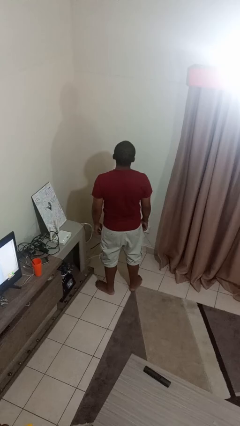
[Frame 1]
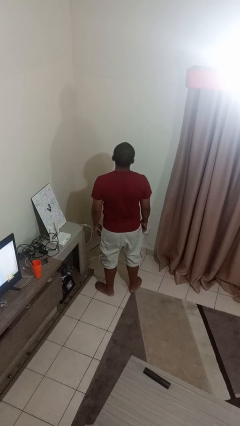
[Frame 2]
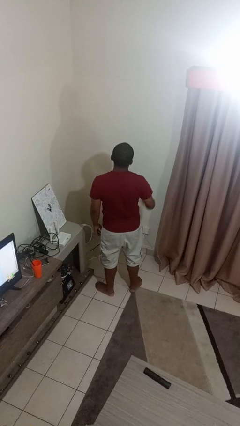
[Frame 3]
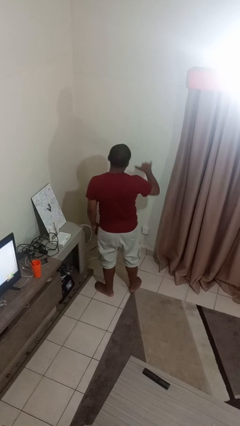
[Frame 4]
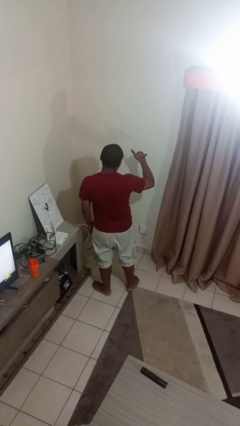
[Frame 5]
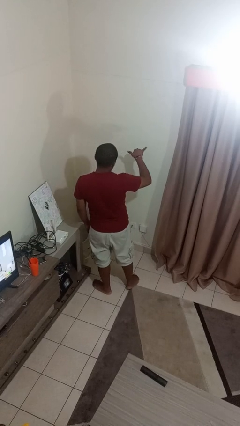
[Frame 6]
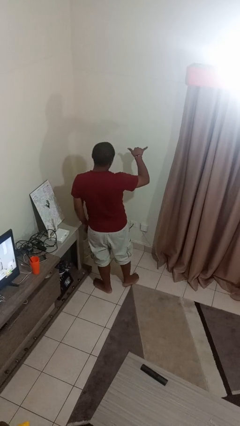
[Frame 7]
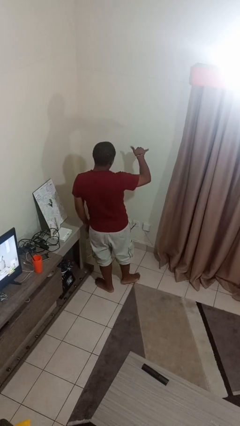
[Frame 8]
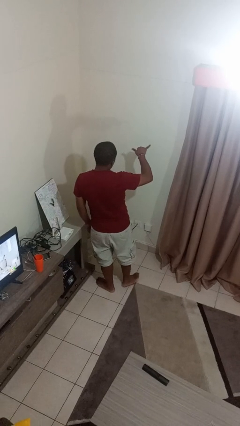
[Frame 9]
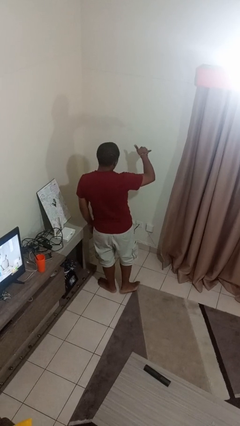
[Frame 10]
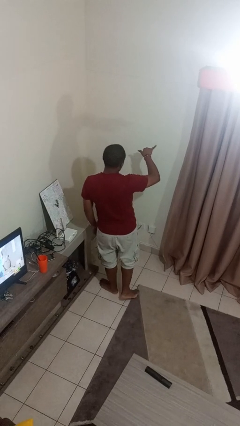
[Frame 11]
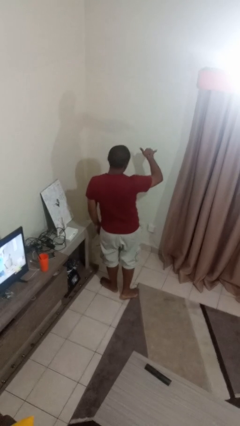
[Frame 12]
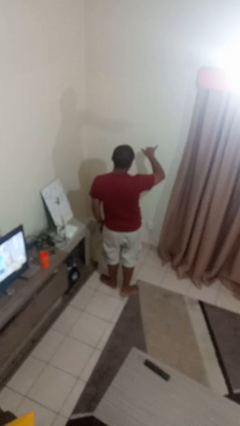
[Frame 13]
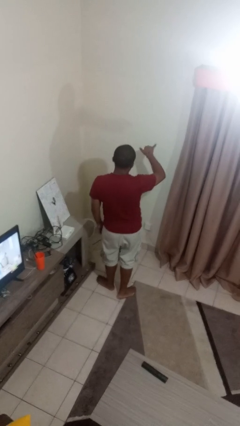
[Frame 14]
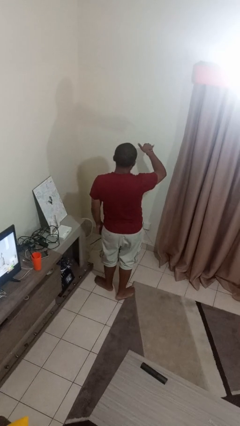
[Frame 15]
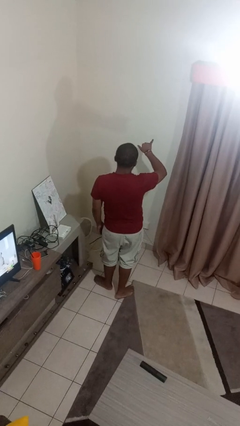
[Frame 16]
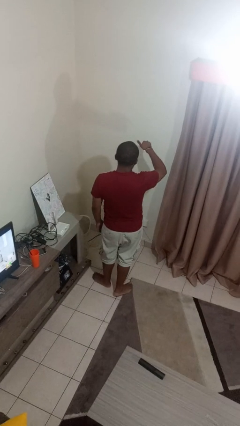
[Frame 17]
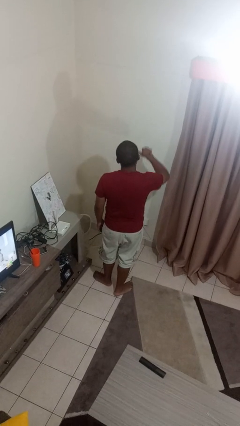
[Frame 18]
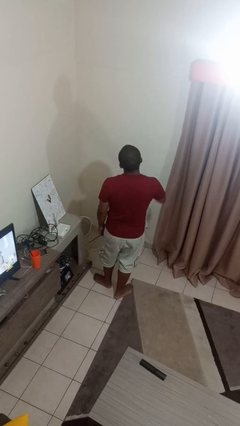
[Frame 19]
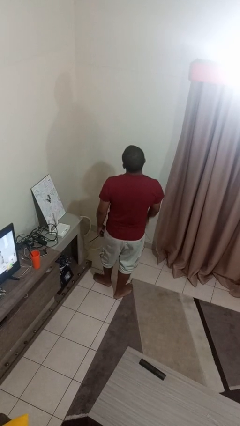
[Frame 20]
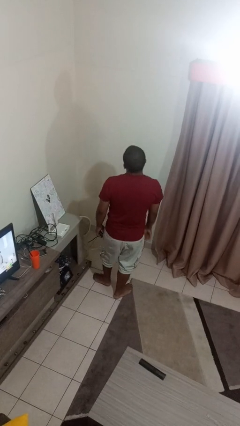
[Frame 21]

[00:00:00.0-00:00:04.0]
person gestures hang loose

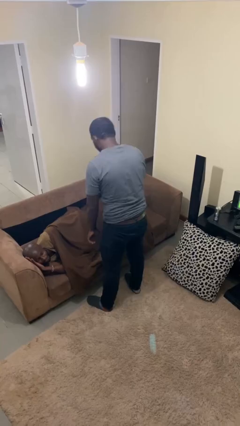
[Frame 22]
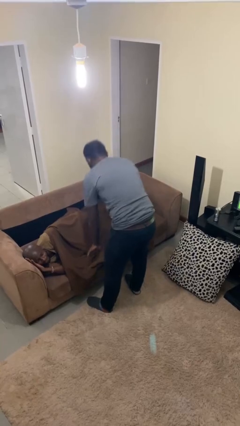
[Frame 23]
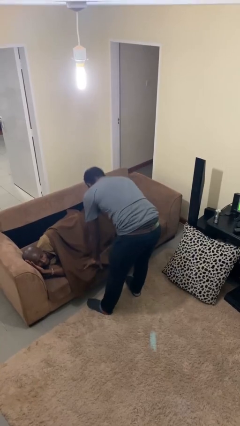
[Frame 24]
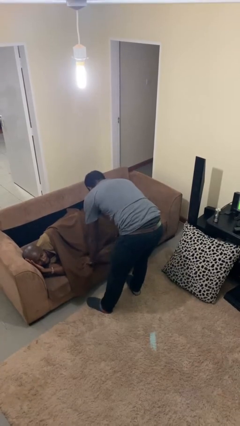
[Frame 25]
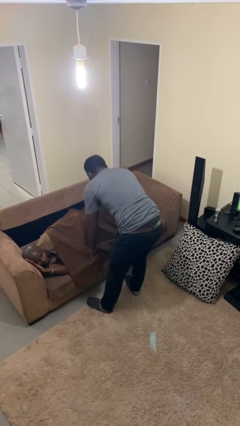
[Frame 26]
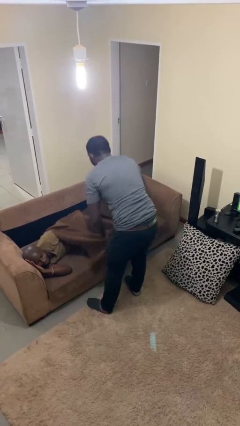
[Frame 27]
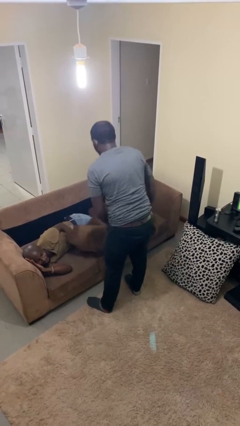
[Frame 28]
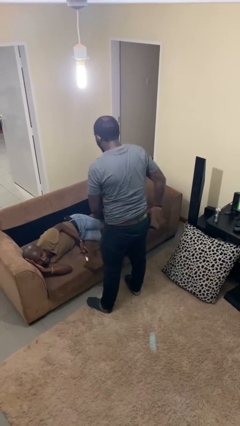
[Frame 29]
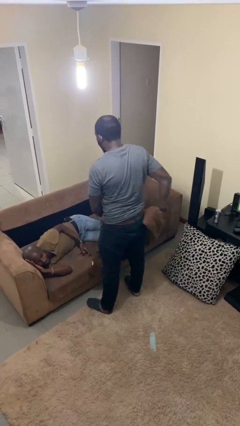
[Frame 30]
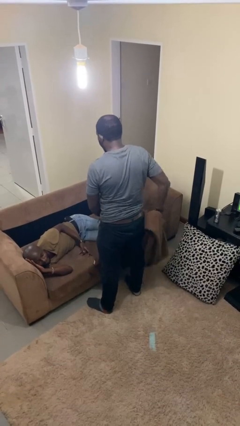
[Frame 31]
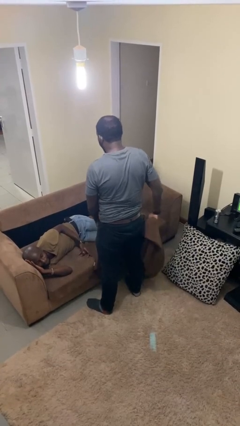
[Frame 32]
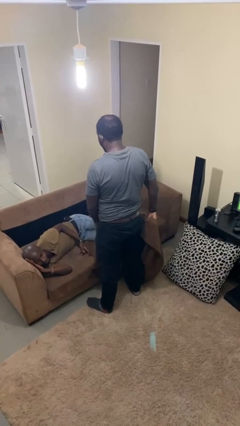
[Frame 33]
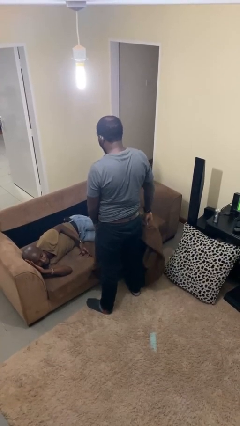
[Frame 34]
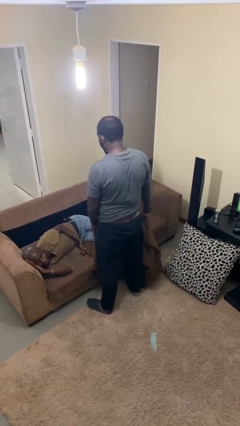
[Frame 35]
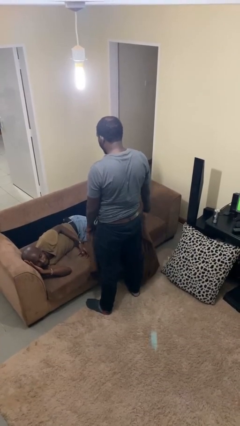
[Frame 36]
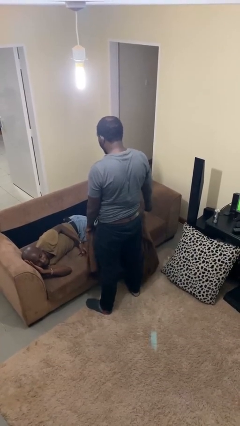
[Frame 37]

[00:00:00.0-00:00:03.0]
person uncovers friend with blanket

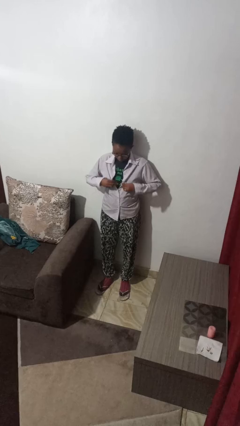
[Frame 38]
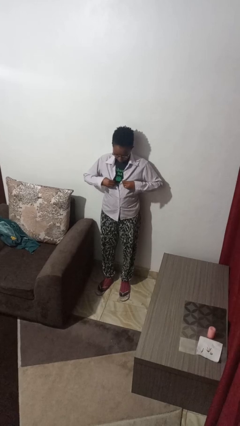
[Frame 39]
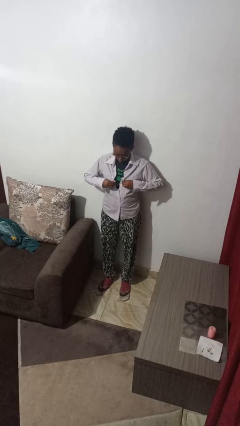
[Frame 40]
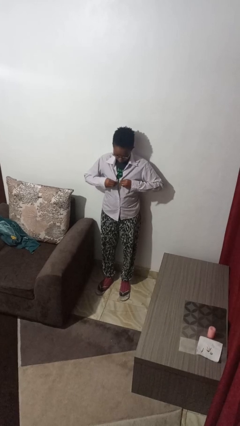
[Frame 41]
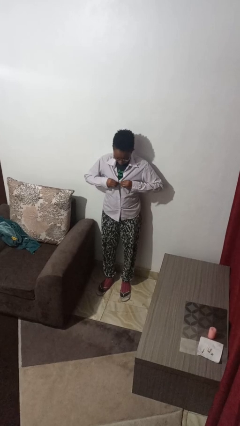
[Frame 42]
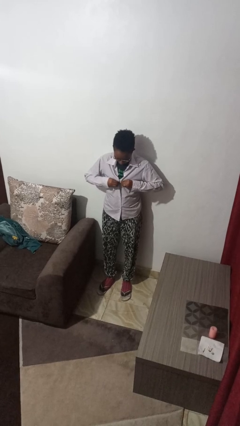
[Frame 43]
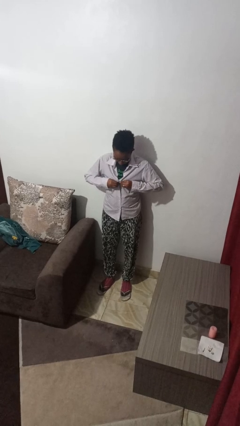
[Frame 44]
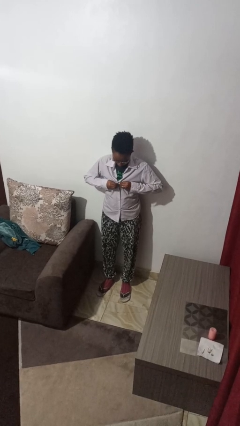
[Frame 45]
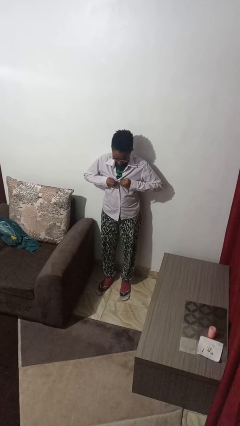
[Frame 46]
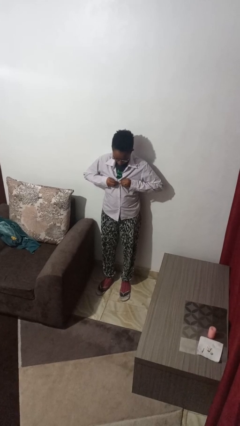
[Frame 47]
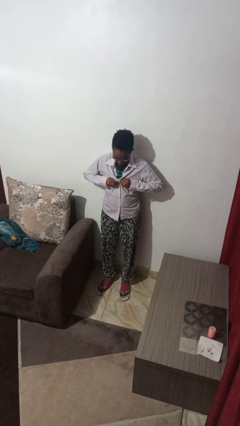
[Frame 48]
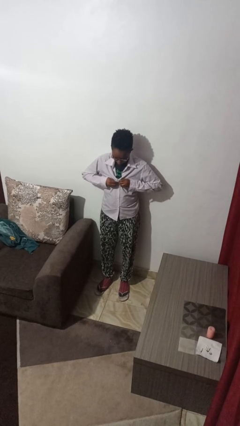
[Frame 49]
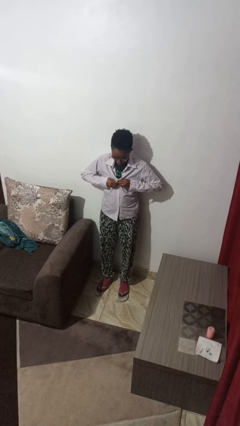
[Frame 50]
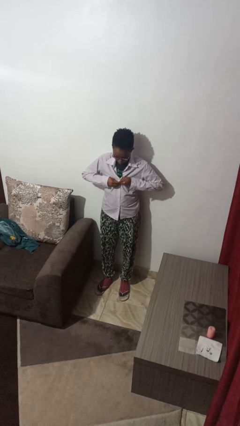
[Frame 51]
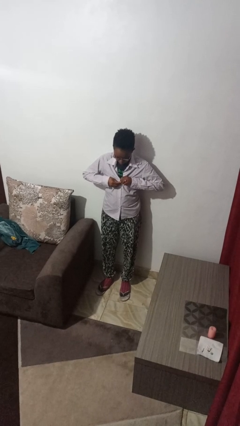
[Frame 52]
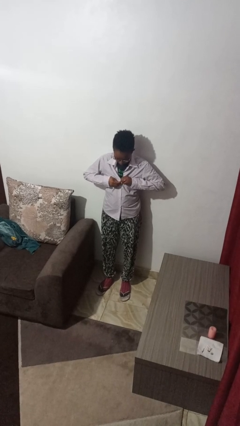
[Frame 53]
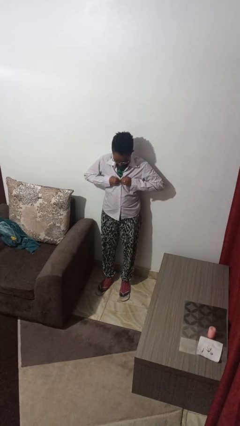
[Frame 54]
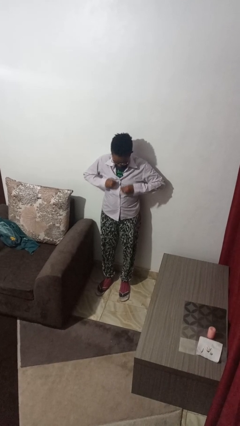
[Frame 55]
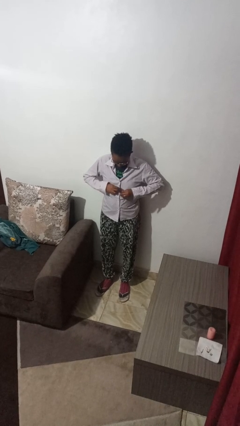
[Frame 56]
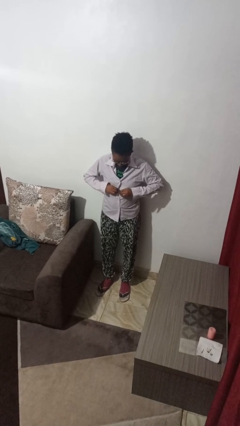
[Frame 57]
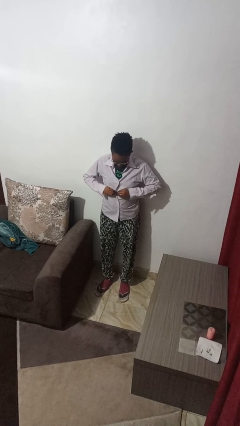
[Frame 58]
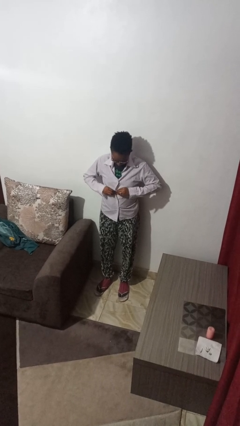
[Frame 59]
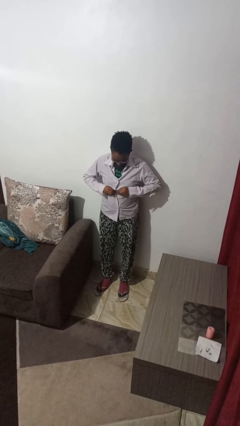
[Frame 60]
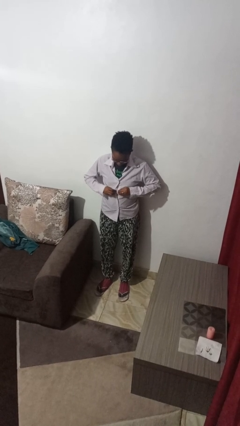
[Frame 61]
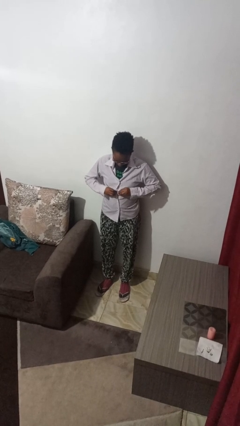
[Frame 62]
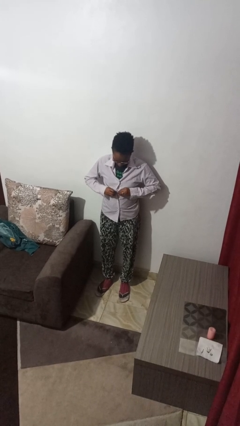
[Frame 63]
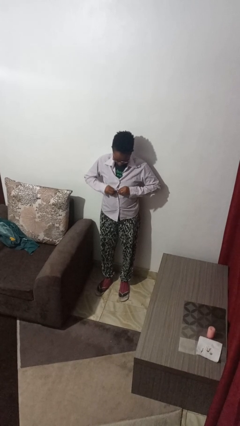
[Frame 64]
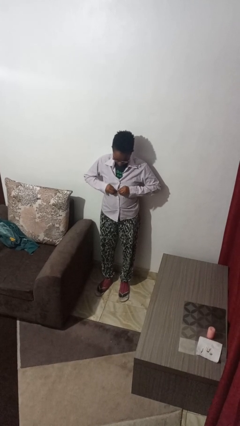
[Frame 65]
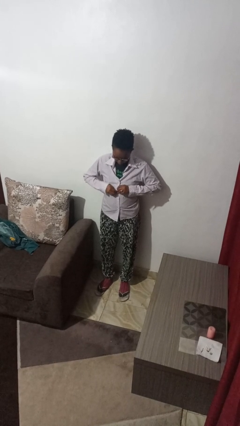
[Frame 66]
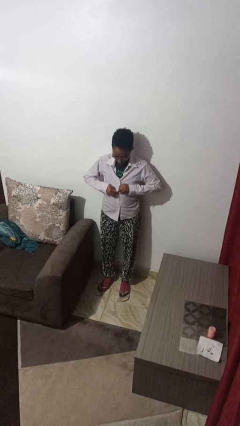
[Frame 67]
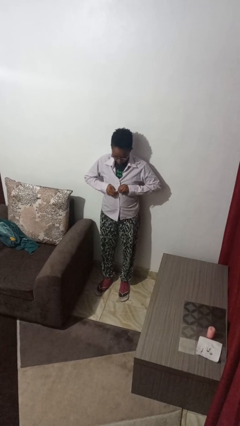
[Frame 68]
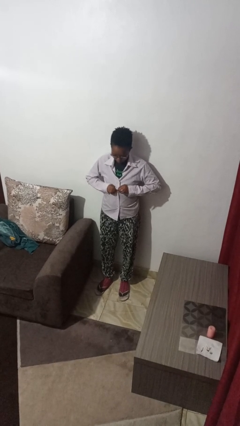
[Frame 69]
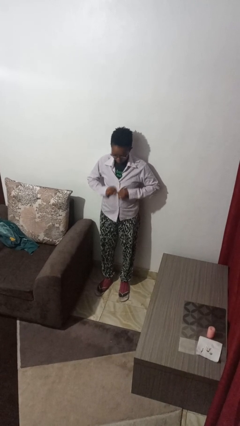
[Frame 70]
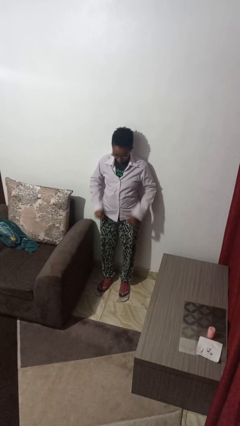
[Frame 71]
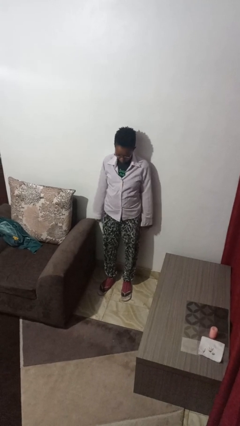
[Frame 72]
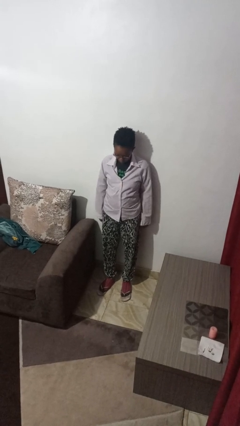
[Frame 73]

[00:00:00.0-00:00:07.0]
person buttons shirt

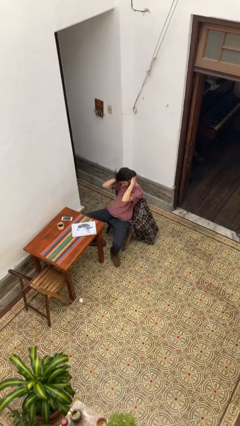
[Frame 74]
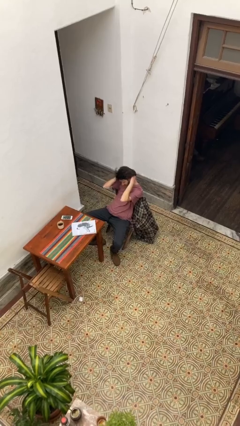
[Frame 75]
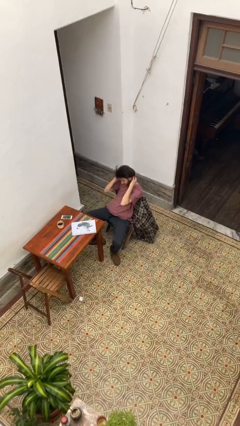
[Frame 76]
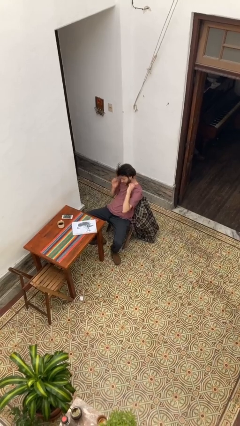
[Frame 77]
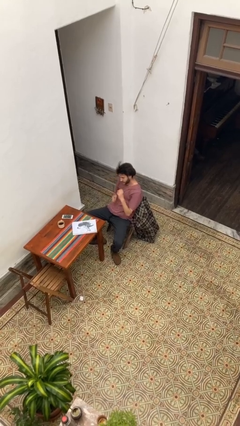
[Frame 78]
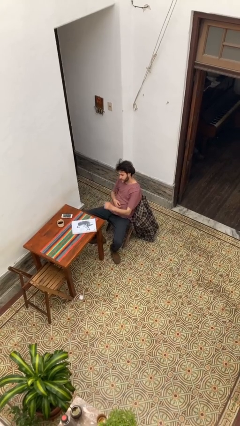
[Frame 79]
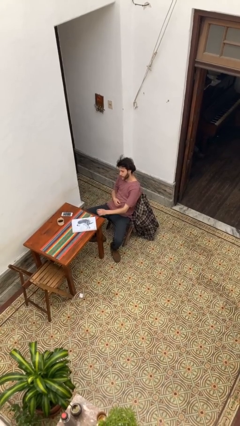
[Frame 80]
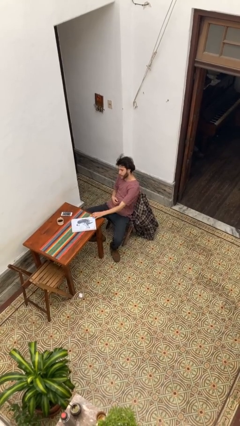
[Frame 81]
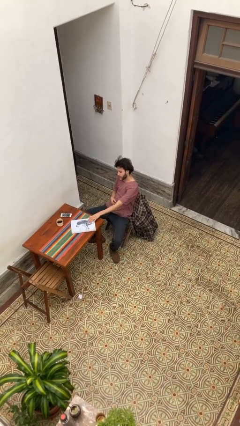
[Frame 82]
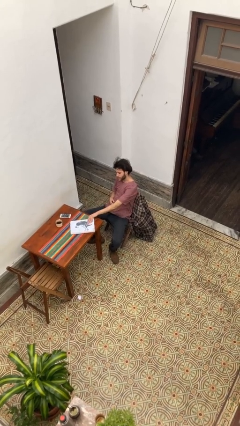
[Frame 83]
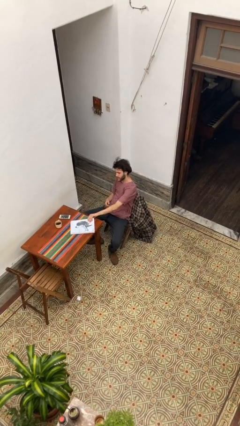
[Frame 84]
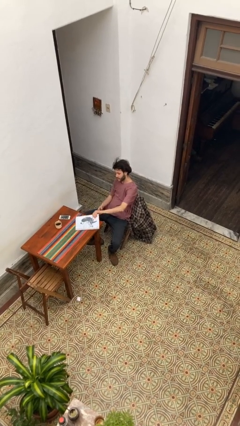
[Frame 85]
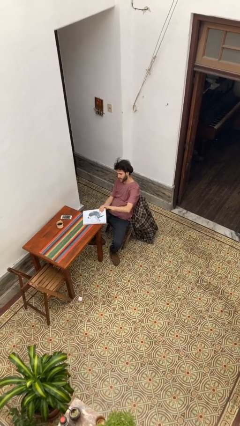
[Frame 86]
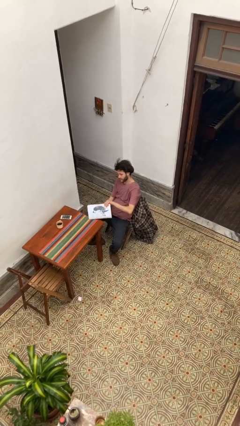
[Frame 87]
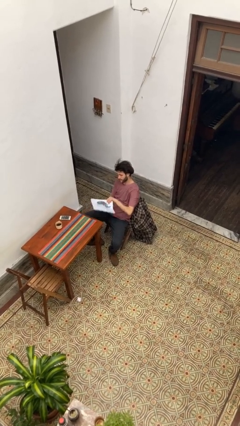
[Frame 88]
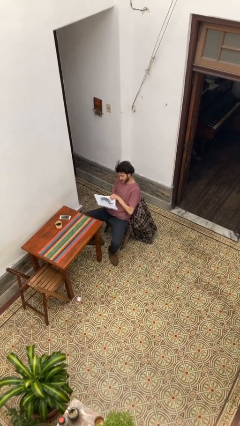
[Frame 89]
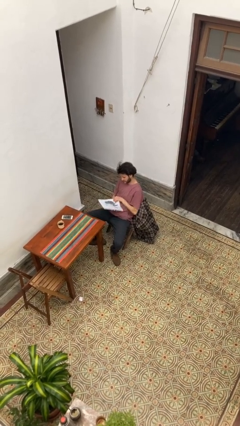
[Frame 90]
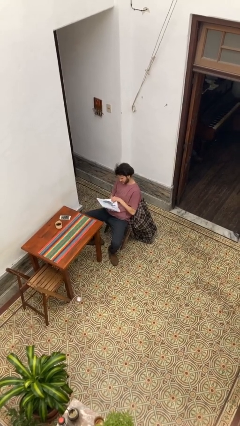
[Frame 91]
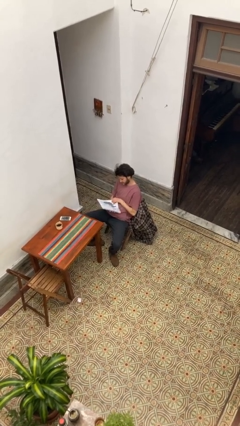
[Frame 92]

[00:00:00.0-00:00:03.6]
person picks up object from table
